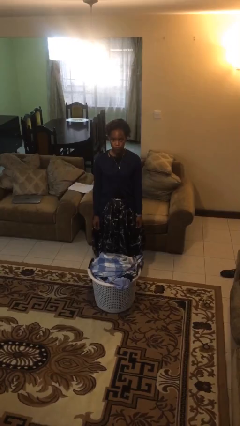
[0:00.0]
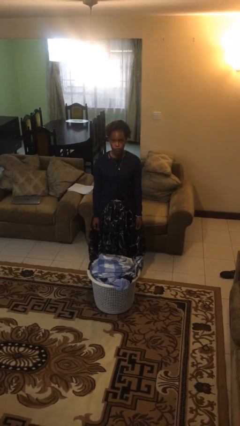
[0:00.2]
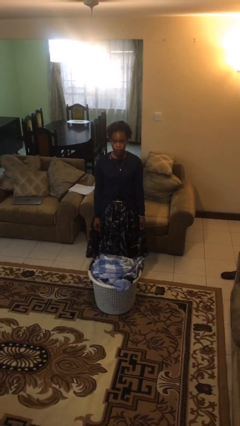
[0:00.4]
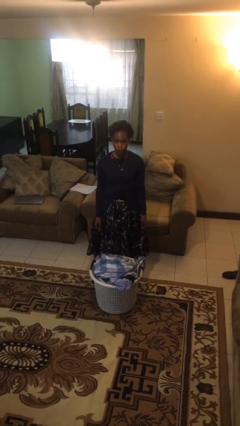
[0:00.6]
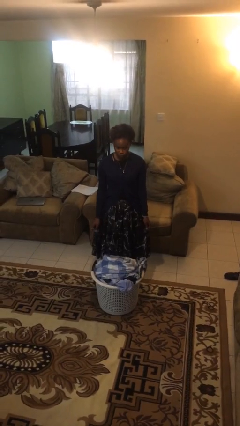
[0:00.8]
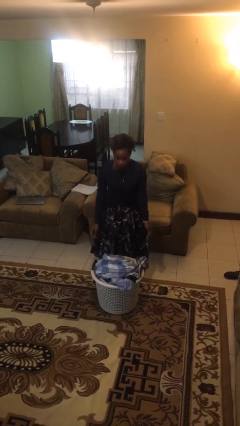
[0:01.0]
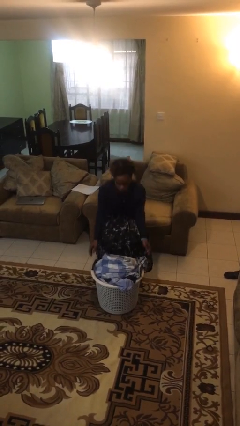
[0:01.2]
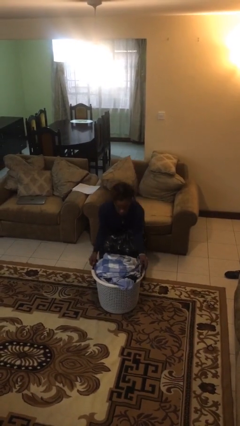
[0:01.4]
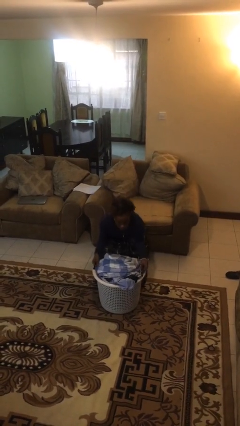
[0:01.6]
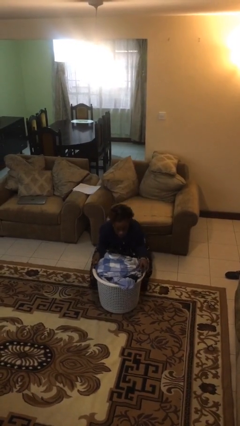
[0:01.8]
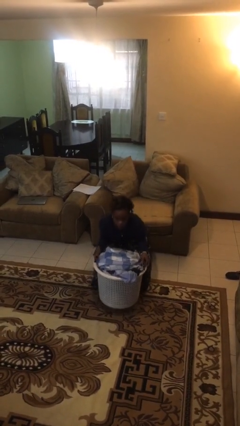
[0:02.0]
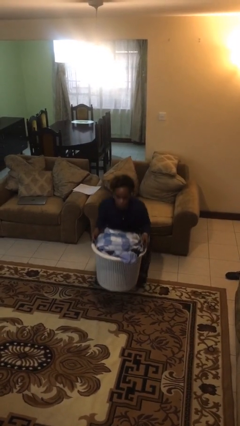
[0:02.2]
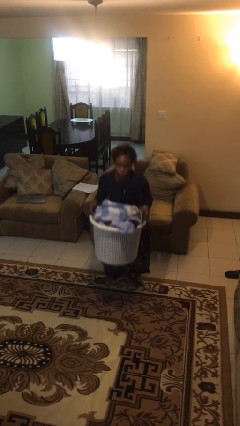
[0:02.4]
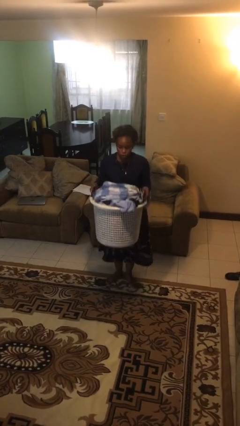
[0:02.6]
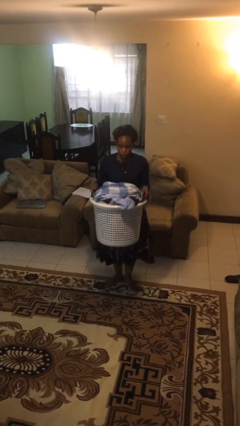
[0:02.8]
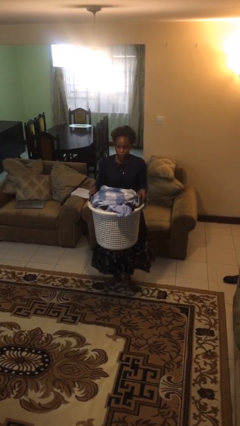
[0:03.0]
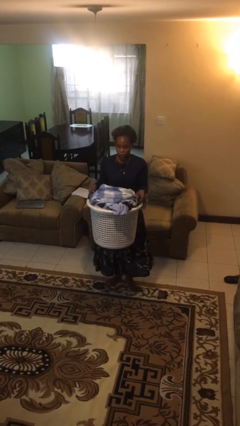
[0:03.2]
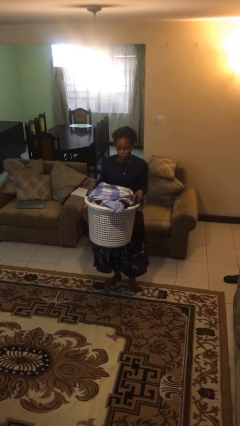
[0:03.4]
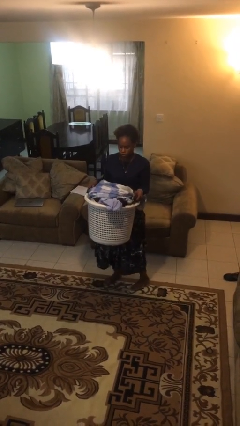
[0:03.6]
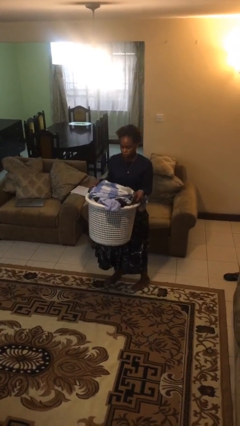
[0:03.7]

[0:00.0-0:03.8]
person picks up object from floor

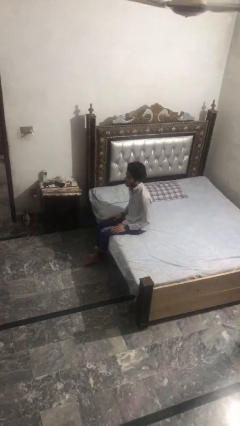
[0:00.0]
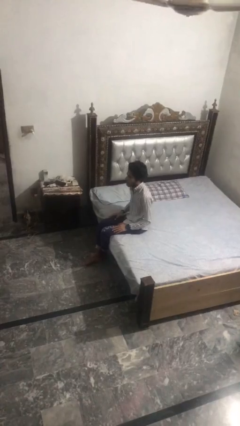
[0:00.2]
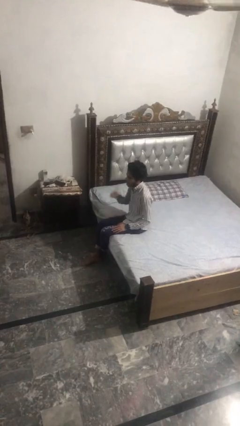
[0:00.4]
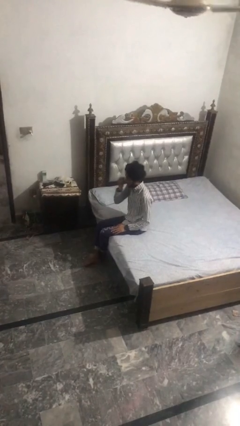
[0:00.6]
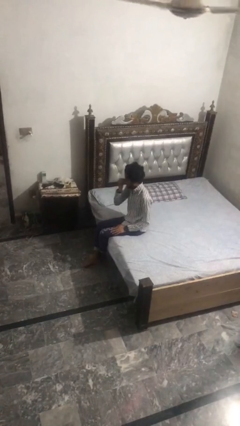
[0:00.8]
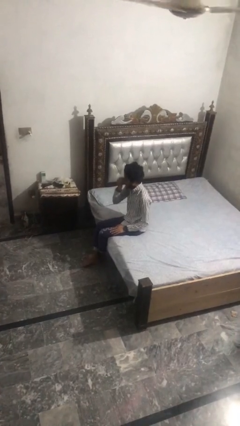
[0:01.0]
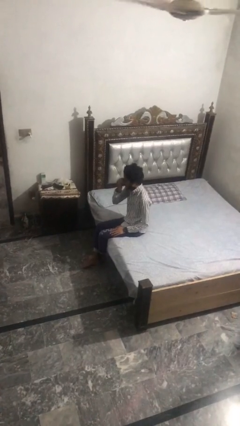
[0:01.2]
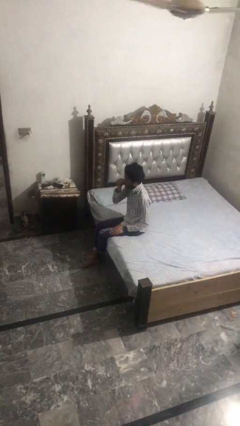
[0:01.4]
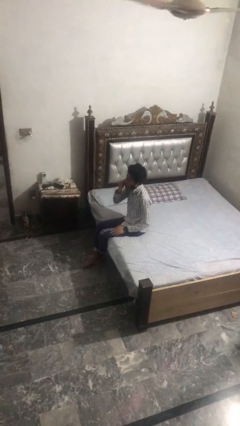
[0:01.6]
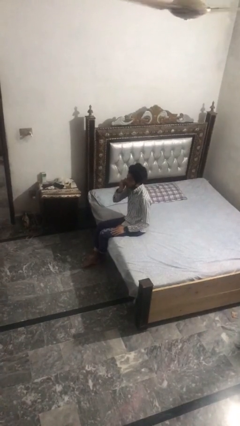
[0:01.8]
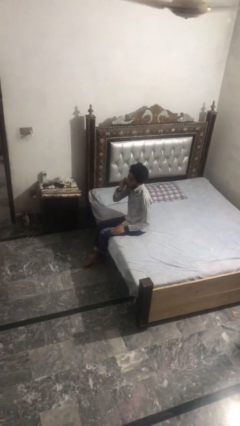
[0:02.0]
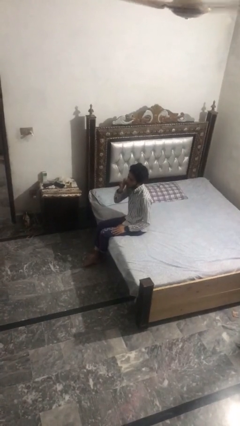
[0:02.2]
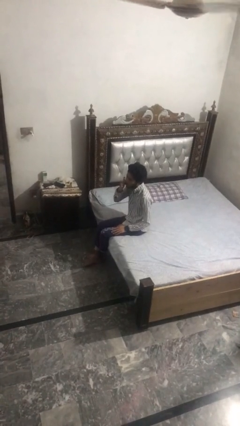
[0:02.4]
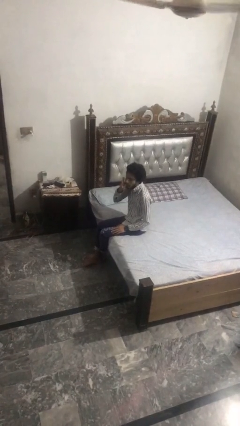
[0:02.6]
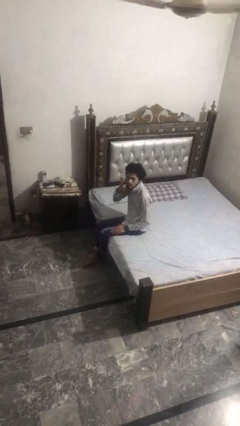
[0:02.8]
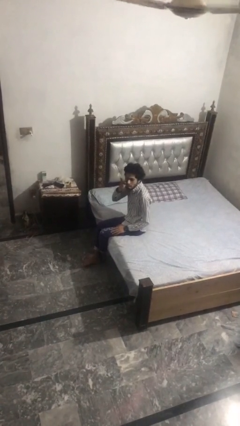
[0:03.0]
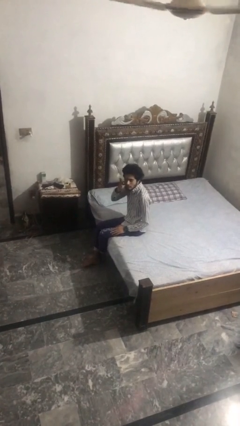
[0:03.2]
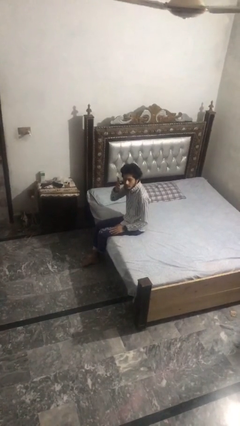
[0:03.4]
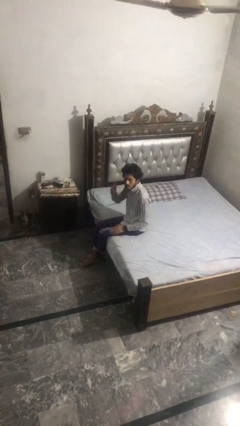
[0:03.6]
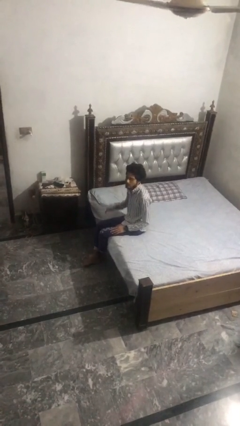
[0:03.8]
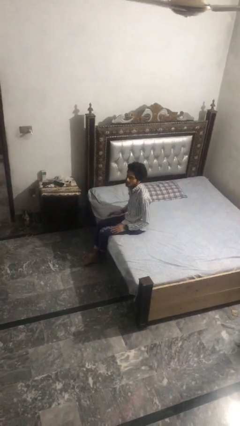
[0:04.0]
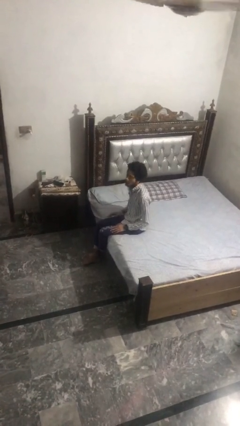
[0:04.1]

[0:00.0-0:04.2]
person scratches face

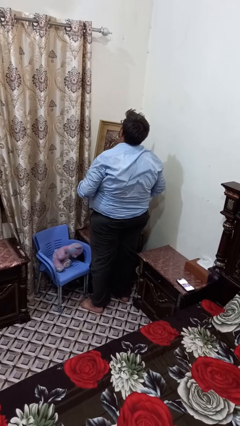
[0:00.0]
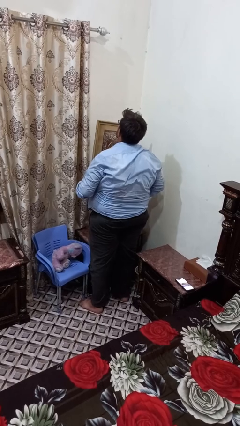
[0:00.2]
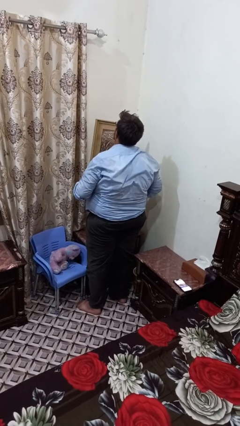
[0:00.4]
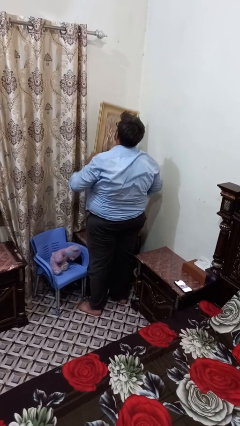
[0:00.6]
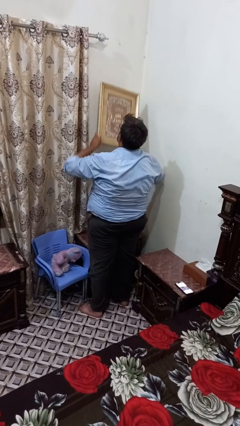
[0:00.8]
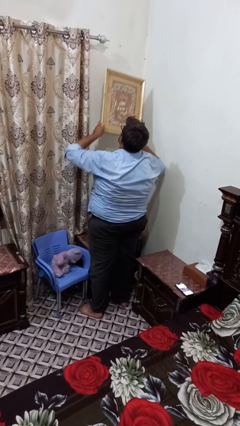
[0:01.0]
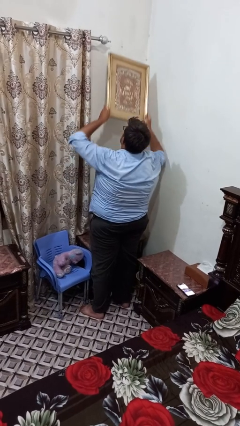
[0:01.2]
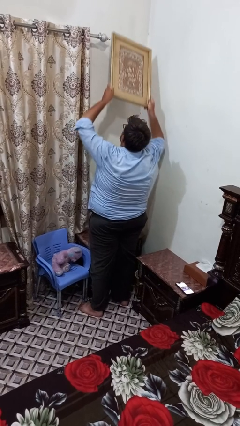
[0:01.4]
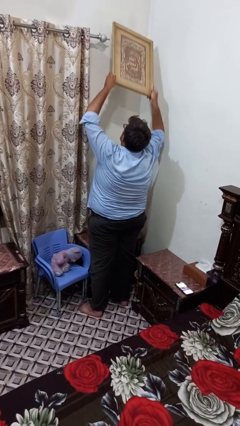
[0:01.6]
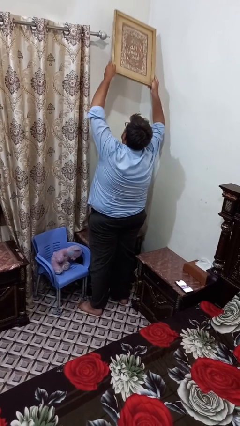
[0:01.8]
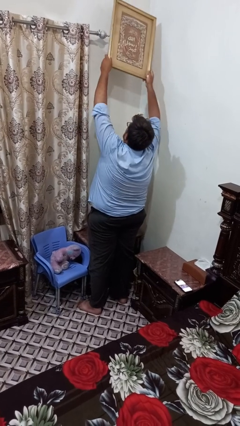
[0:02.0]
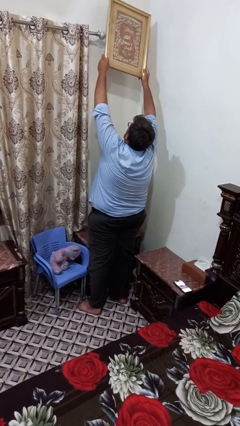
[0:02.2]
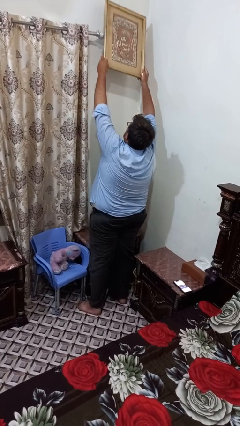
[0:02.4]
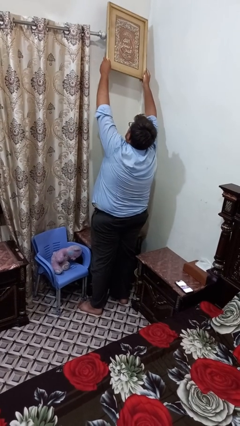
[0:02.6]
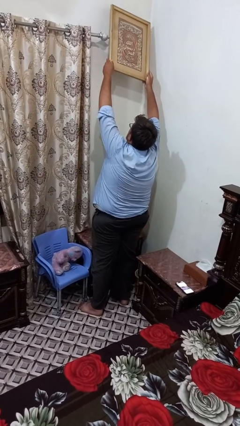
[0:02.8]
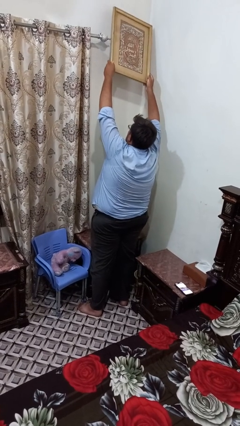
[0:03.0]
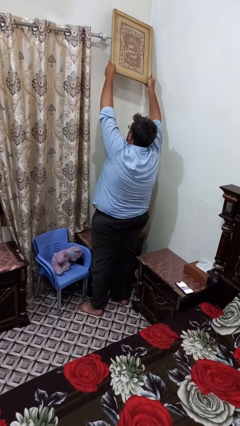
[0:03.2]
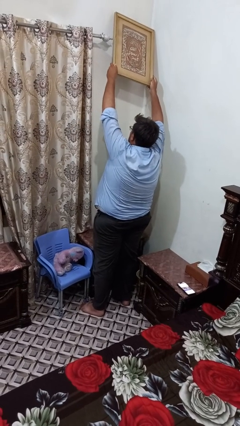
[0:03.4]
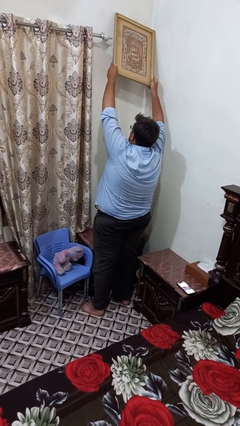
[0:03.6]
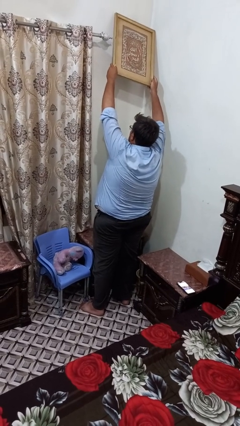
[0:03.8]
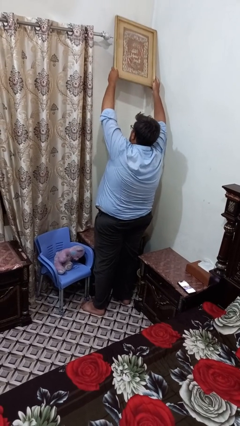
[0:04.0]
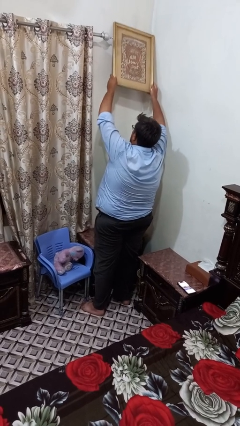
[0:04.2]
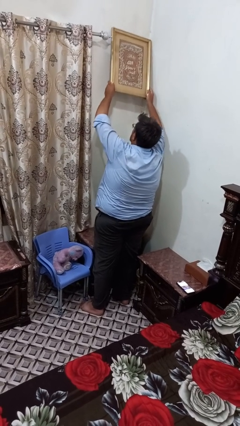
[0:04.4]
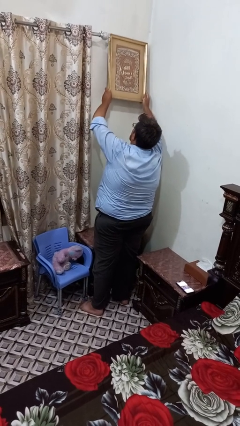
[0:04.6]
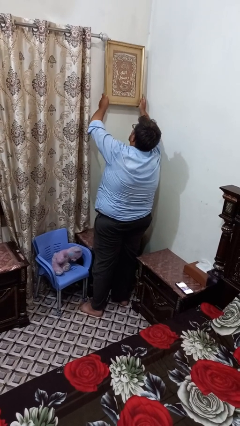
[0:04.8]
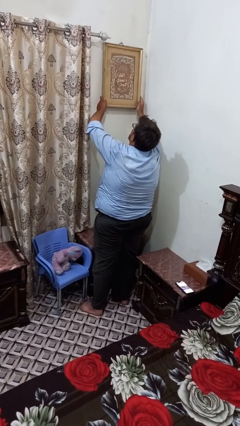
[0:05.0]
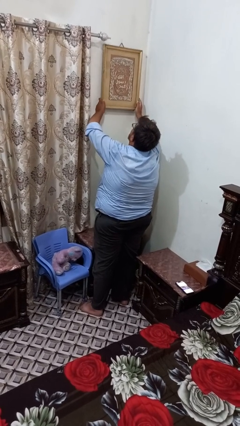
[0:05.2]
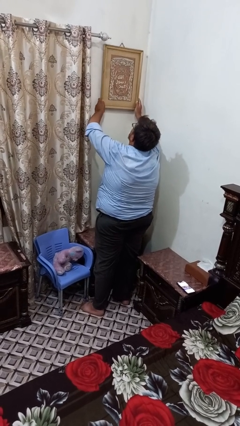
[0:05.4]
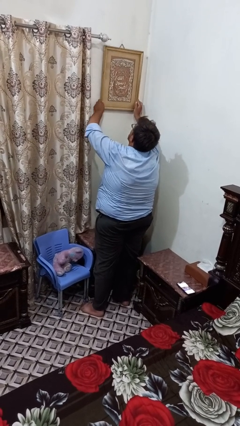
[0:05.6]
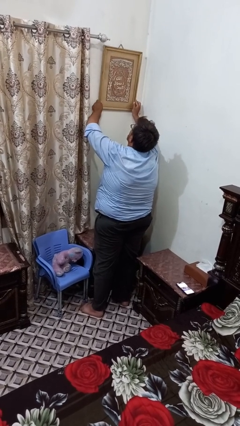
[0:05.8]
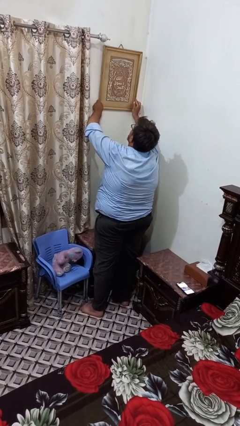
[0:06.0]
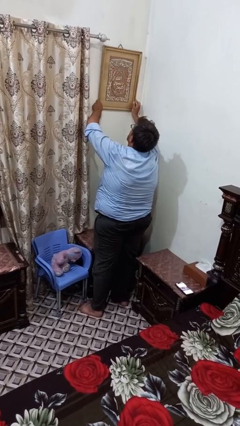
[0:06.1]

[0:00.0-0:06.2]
person puts up picture frame

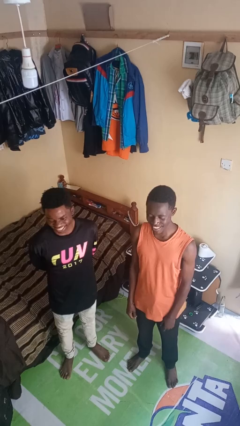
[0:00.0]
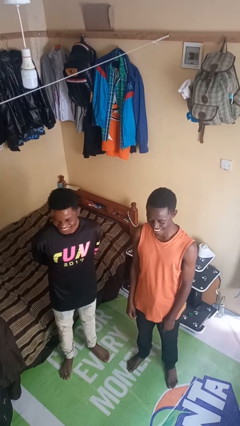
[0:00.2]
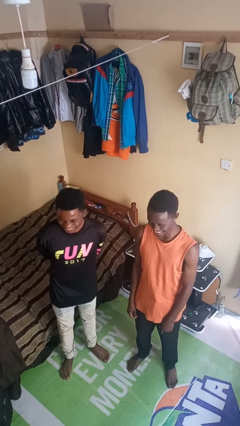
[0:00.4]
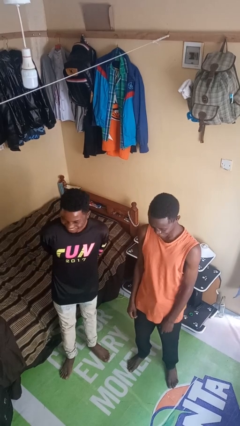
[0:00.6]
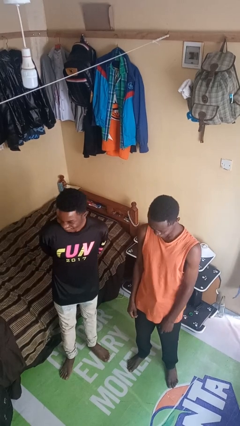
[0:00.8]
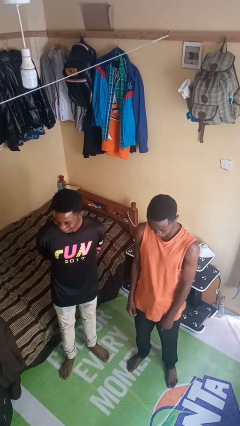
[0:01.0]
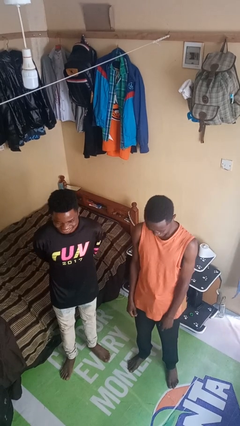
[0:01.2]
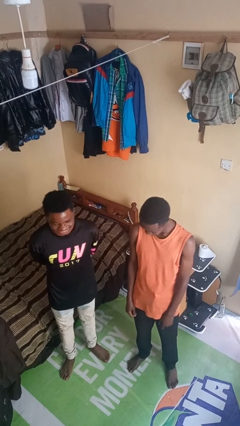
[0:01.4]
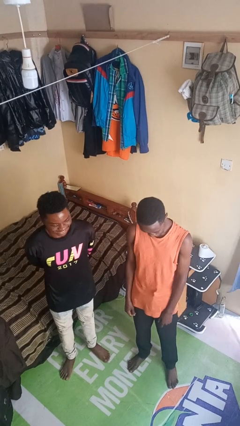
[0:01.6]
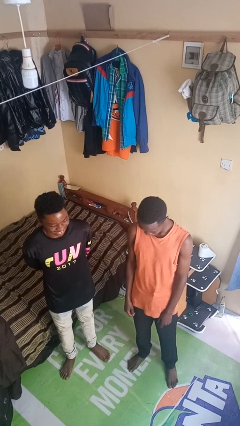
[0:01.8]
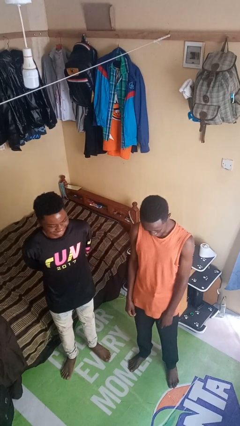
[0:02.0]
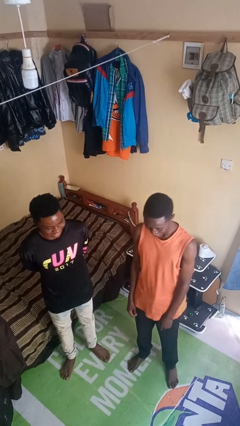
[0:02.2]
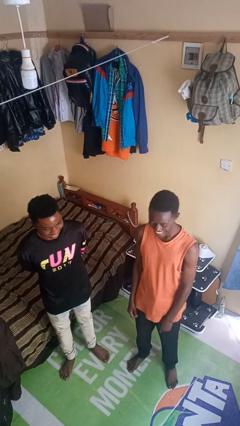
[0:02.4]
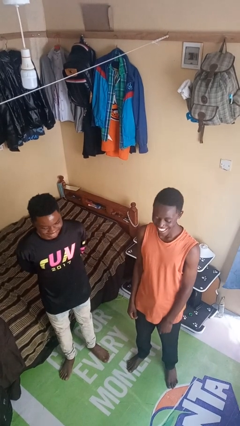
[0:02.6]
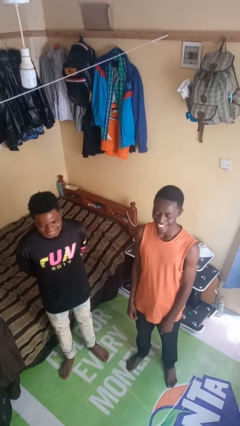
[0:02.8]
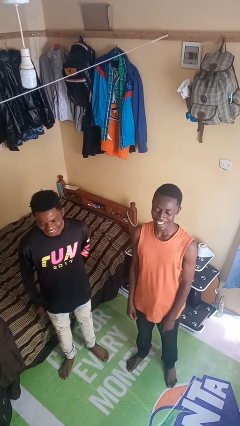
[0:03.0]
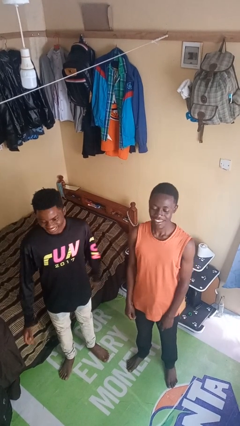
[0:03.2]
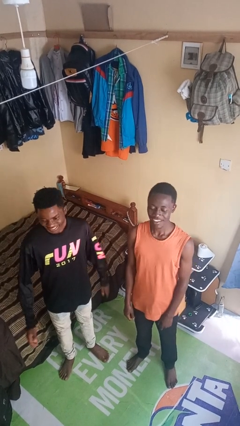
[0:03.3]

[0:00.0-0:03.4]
person laughs with person
